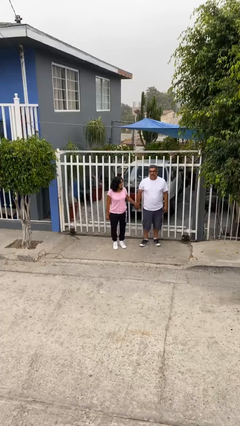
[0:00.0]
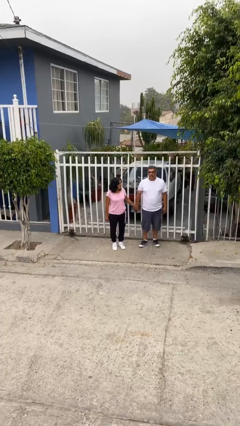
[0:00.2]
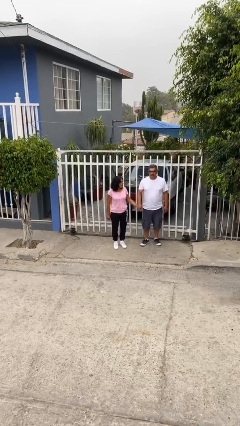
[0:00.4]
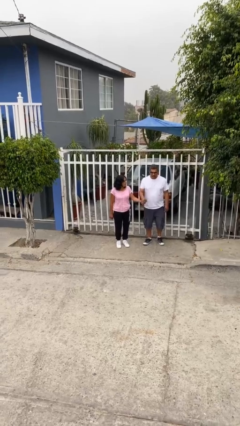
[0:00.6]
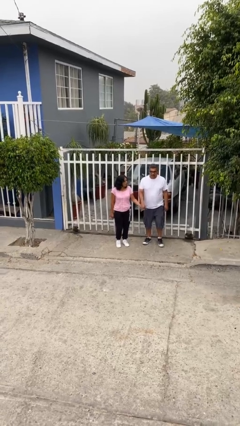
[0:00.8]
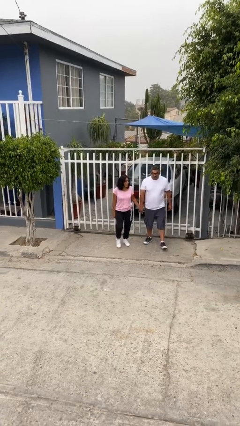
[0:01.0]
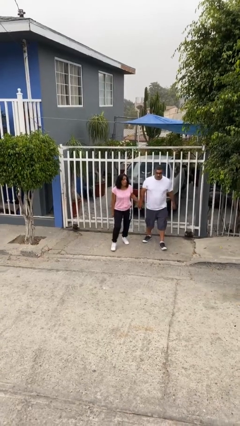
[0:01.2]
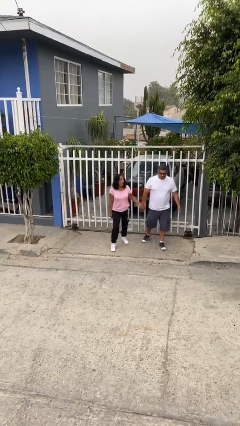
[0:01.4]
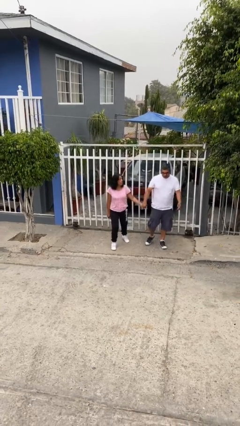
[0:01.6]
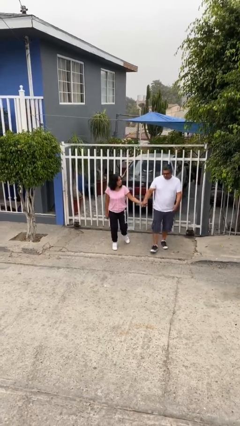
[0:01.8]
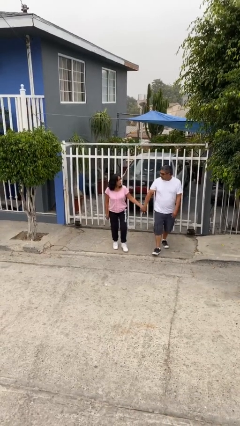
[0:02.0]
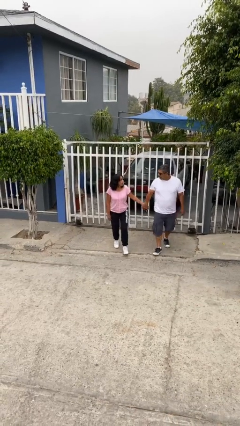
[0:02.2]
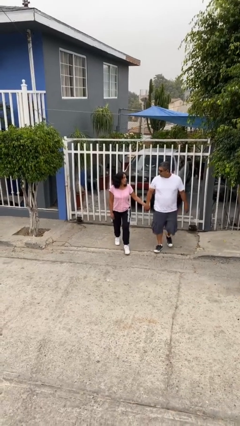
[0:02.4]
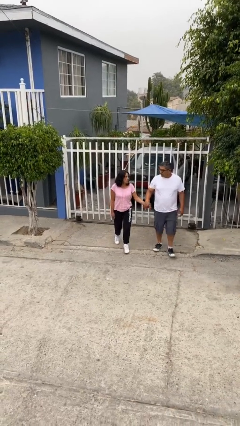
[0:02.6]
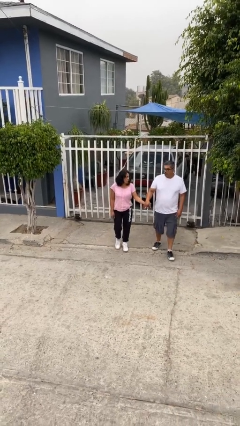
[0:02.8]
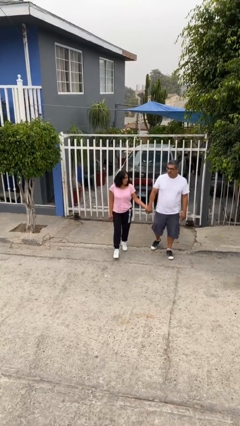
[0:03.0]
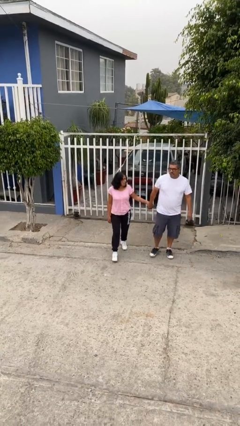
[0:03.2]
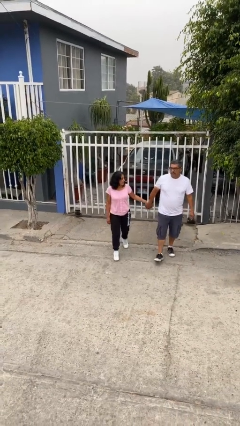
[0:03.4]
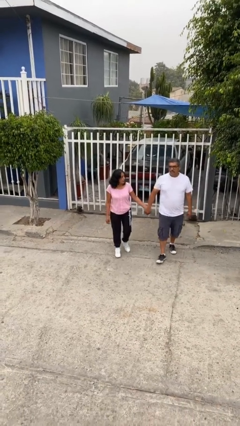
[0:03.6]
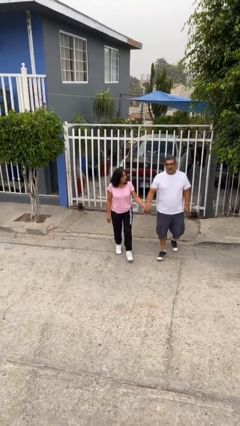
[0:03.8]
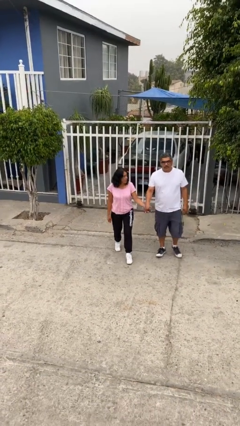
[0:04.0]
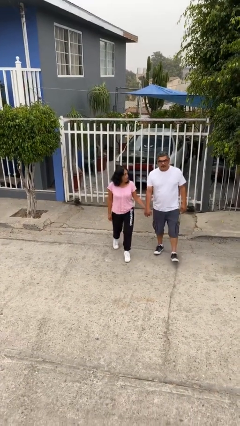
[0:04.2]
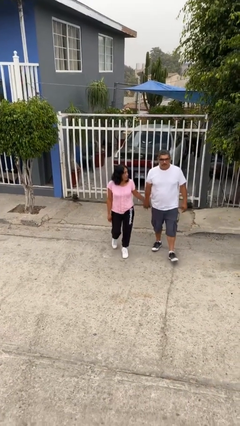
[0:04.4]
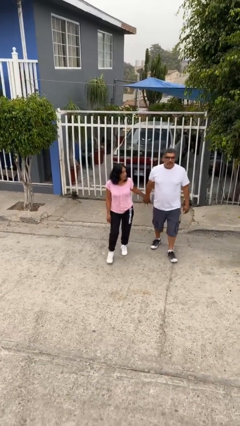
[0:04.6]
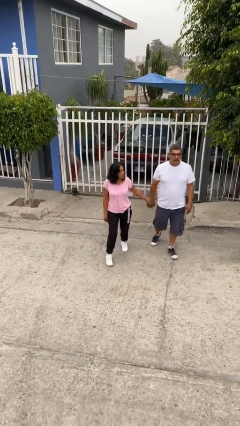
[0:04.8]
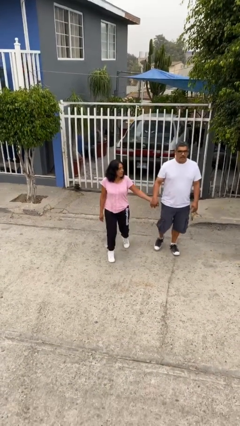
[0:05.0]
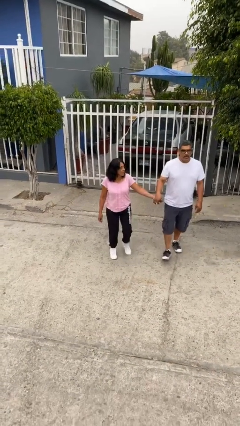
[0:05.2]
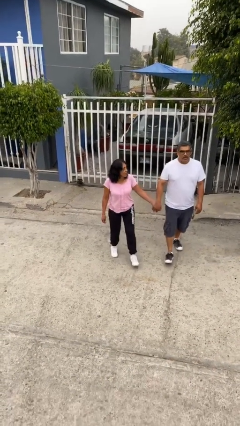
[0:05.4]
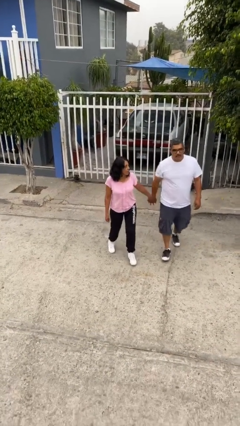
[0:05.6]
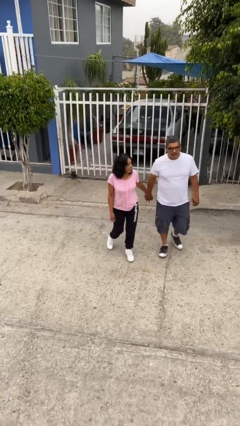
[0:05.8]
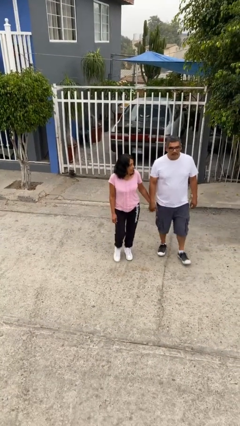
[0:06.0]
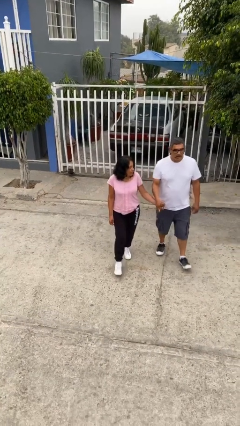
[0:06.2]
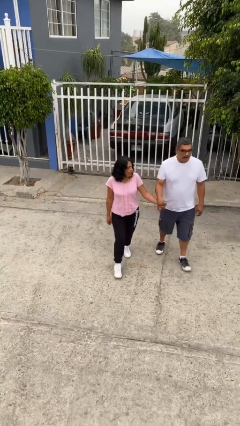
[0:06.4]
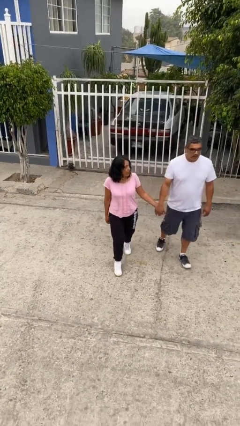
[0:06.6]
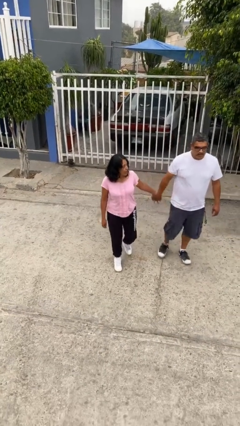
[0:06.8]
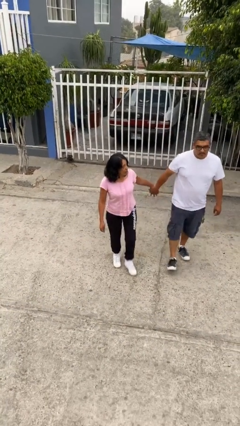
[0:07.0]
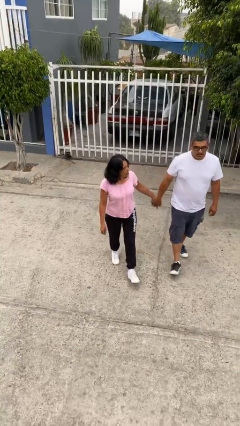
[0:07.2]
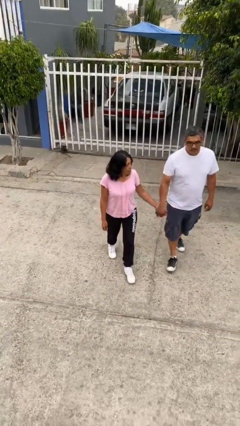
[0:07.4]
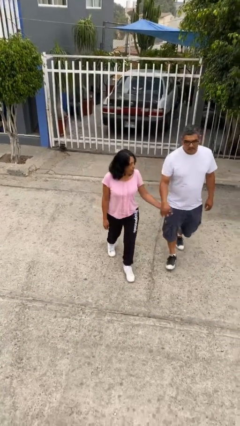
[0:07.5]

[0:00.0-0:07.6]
person holds hand

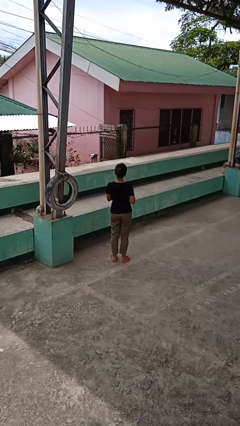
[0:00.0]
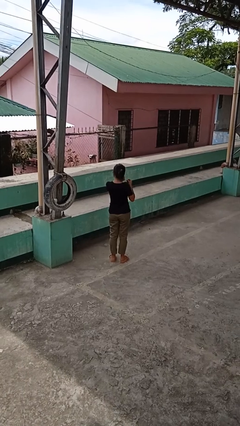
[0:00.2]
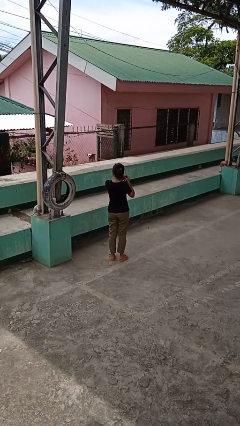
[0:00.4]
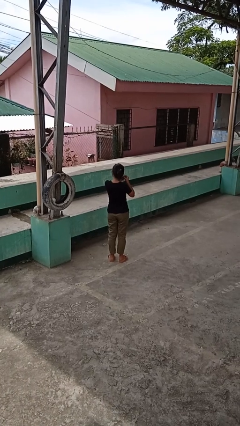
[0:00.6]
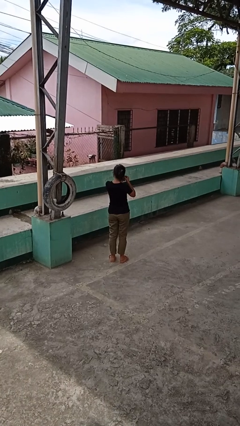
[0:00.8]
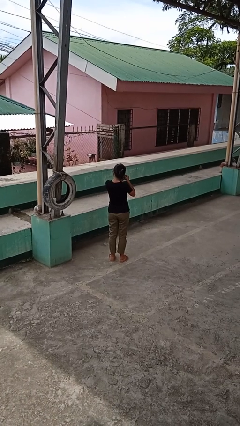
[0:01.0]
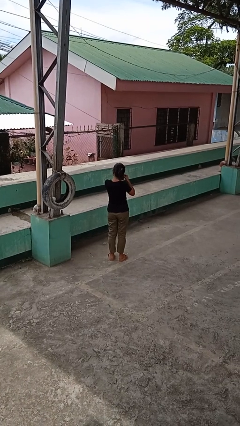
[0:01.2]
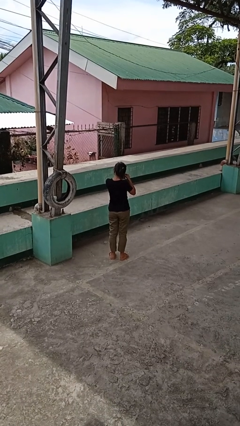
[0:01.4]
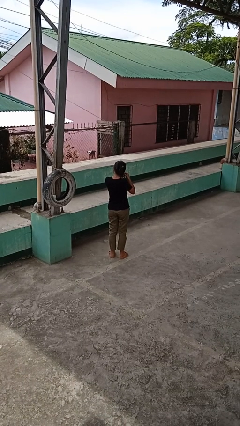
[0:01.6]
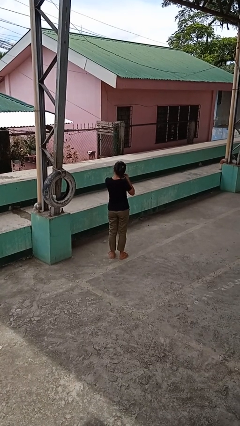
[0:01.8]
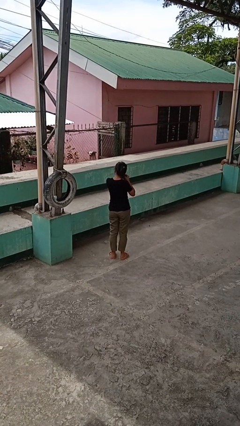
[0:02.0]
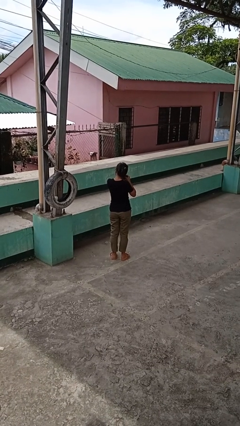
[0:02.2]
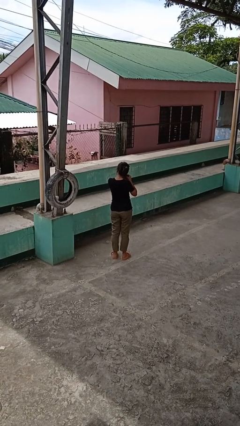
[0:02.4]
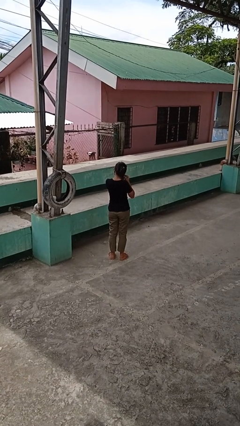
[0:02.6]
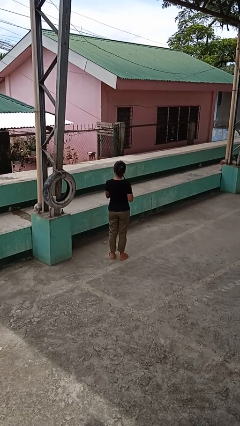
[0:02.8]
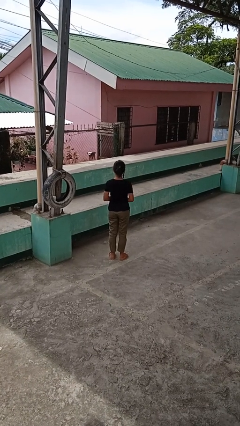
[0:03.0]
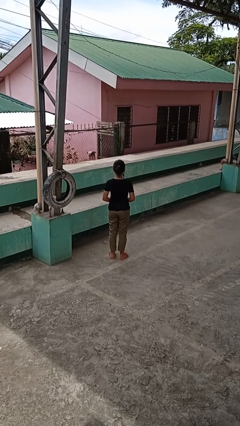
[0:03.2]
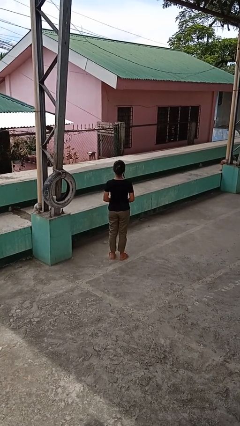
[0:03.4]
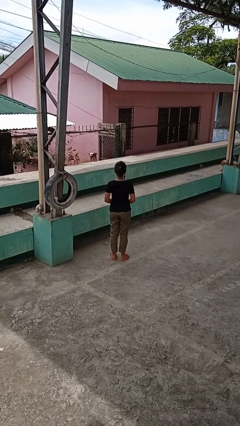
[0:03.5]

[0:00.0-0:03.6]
person puts on earrings

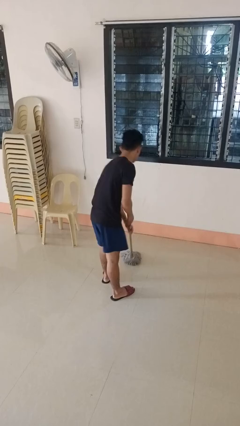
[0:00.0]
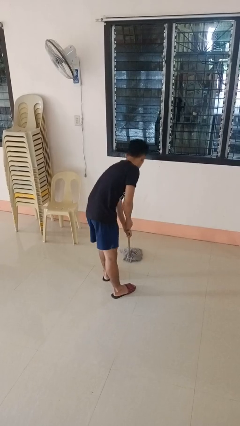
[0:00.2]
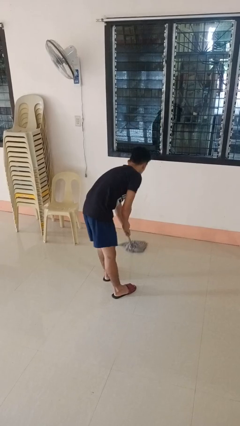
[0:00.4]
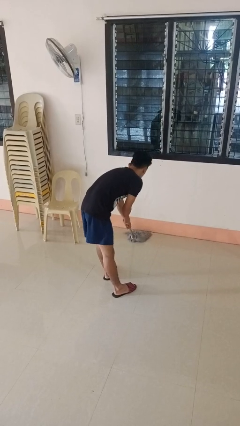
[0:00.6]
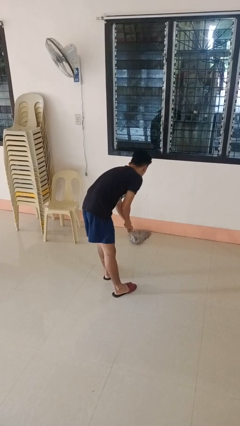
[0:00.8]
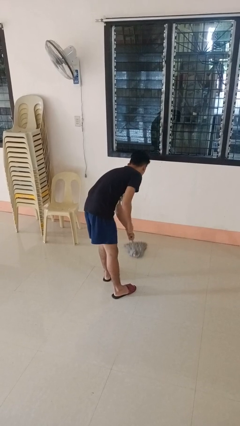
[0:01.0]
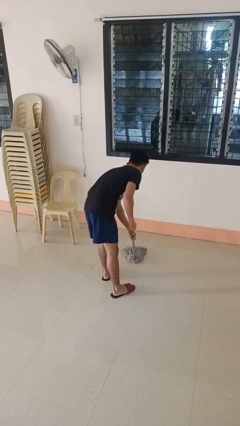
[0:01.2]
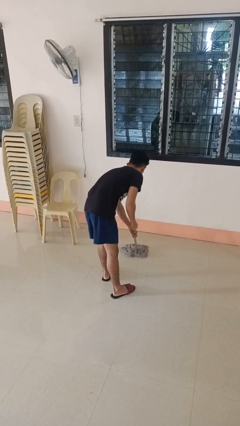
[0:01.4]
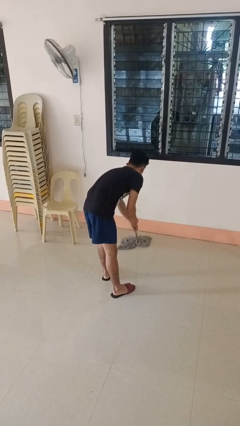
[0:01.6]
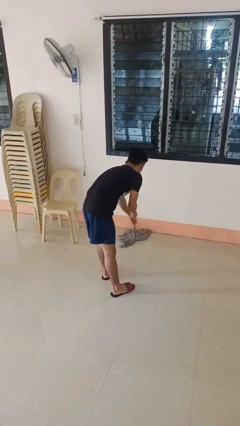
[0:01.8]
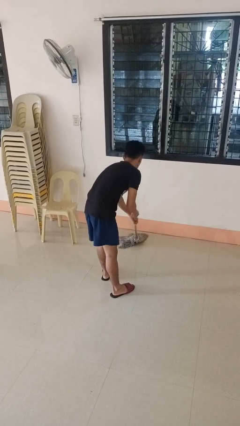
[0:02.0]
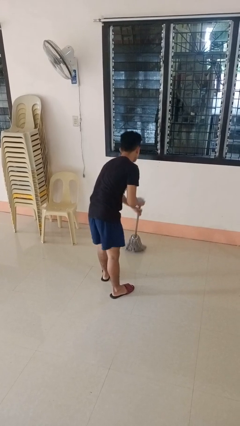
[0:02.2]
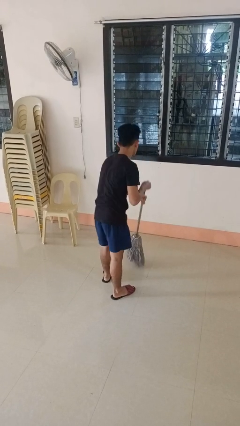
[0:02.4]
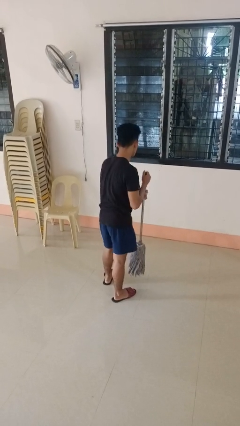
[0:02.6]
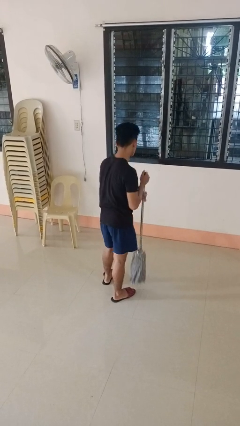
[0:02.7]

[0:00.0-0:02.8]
person mops

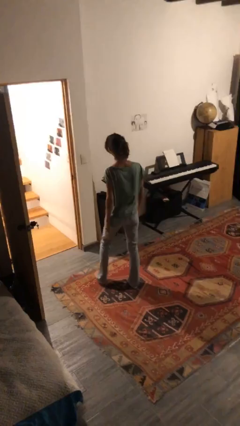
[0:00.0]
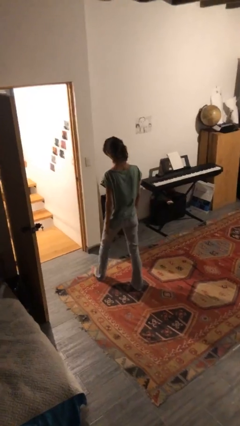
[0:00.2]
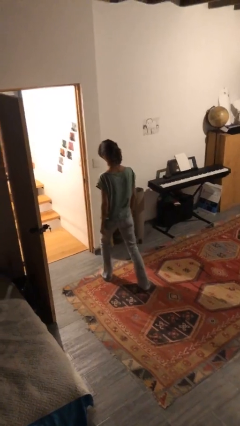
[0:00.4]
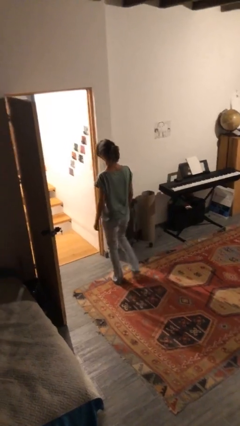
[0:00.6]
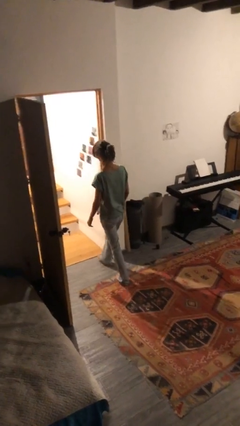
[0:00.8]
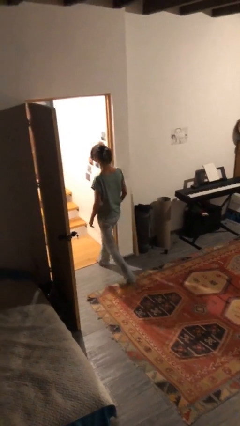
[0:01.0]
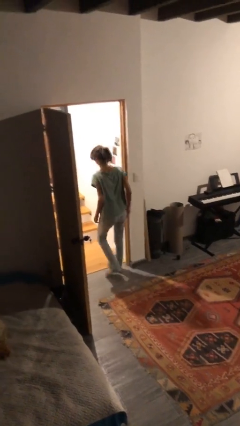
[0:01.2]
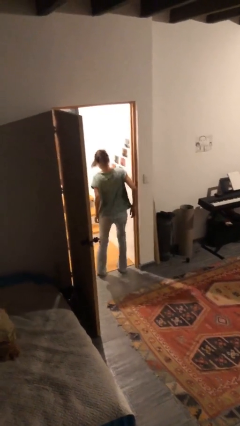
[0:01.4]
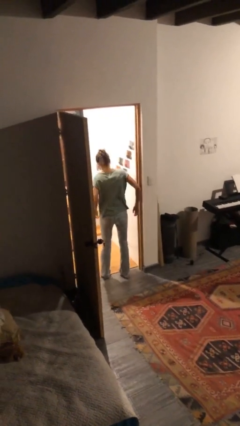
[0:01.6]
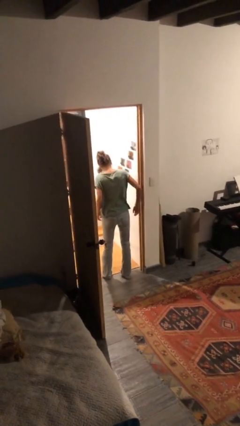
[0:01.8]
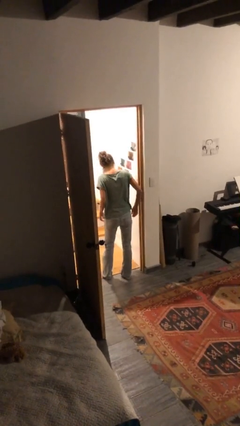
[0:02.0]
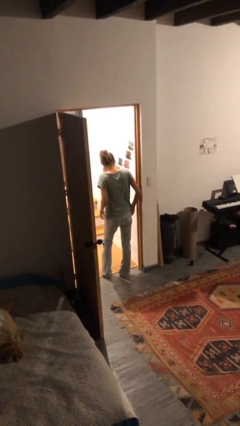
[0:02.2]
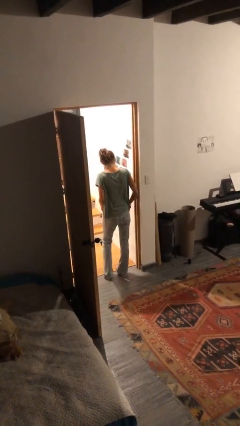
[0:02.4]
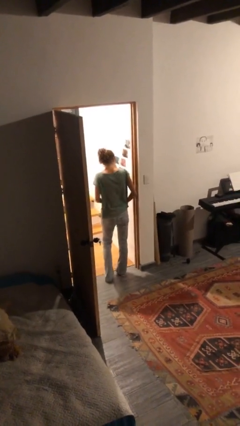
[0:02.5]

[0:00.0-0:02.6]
person bumps into wall

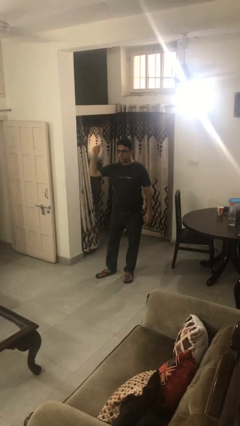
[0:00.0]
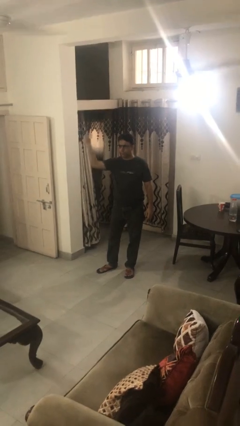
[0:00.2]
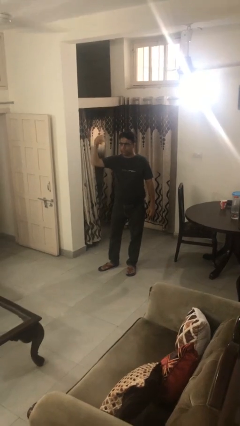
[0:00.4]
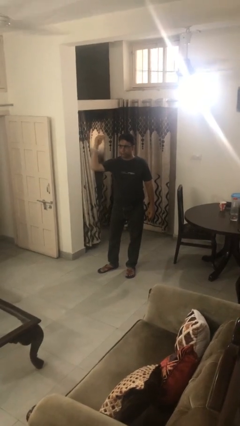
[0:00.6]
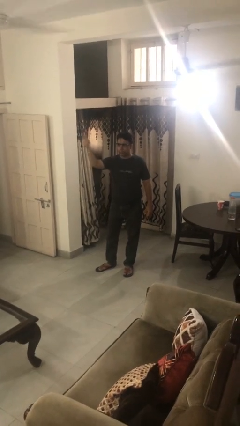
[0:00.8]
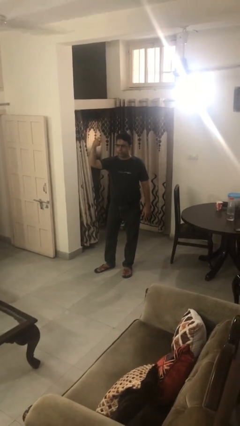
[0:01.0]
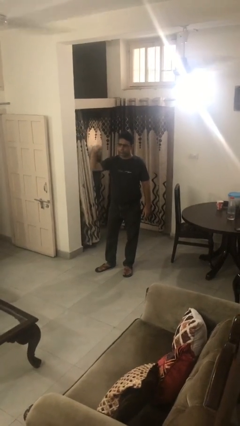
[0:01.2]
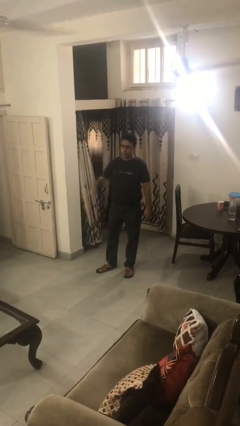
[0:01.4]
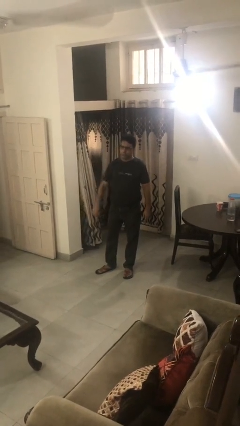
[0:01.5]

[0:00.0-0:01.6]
person snaps fingers
